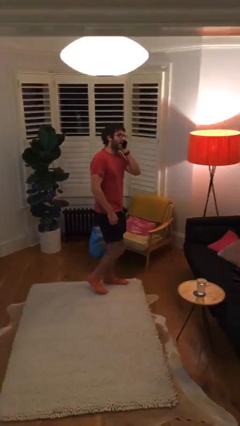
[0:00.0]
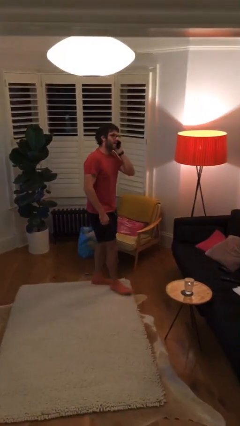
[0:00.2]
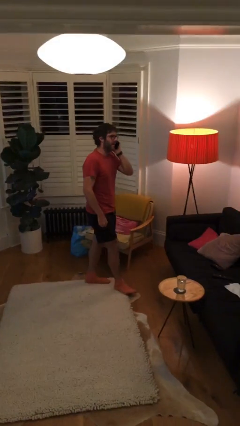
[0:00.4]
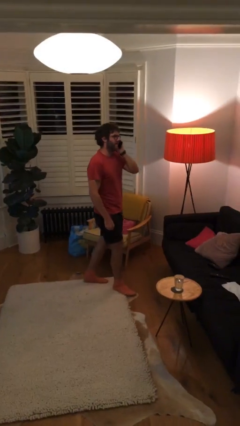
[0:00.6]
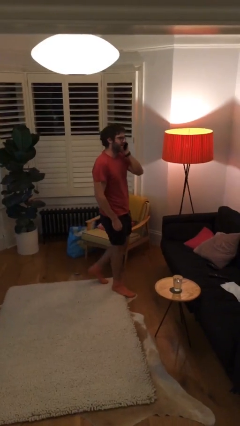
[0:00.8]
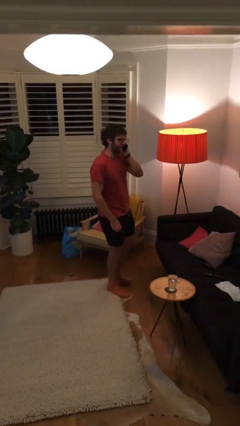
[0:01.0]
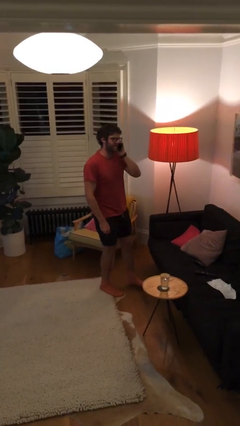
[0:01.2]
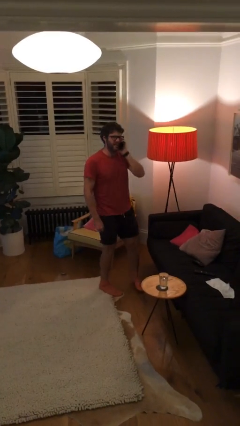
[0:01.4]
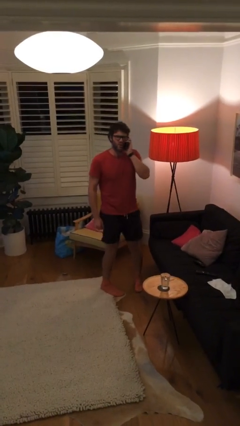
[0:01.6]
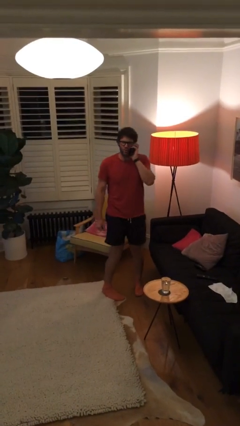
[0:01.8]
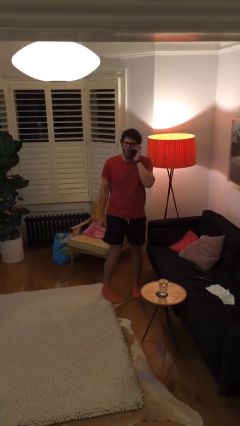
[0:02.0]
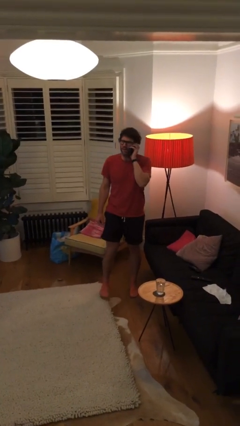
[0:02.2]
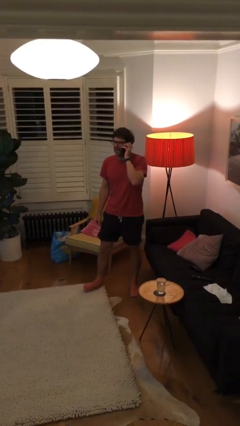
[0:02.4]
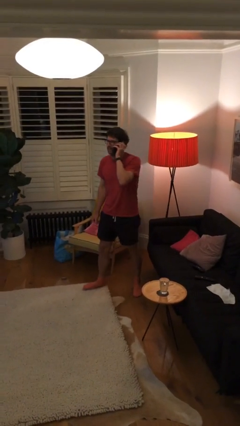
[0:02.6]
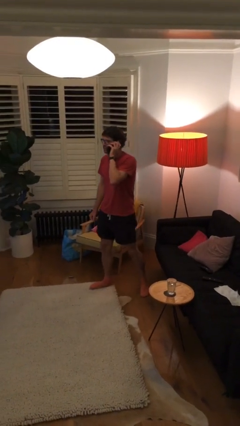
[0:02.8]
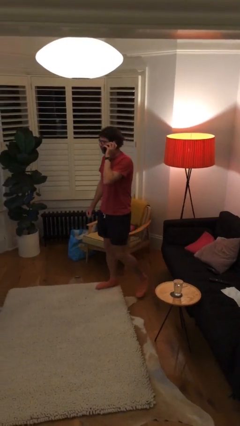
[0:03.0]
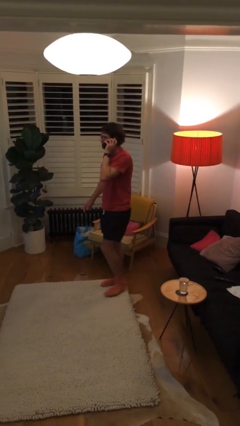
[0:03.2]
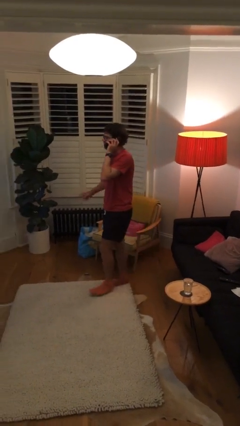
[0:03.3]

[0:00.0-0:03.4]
person talks on phone

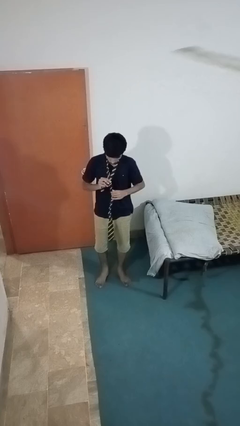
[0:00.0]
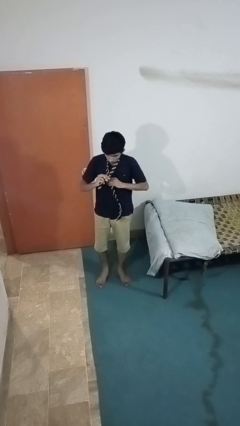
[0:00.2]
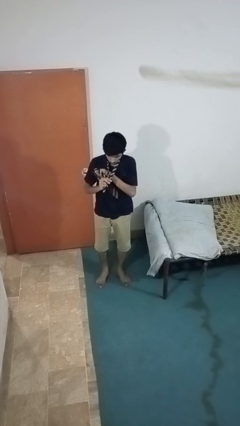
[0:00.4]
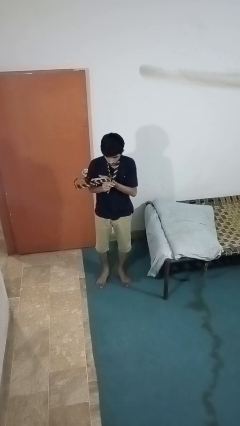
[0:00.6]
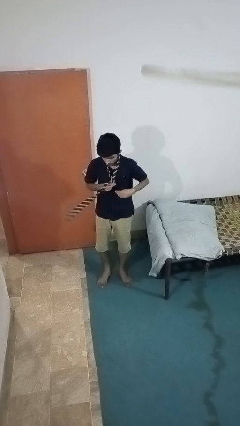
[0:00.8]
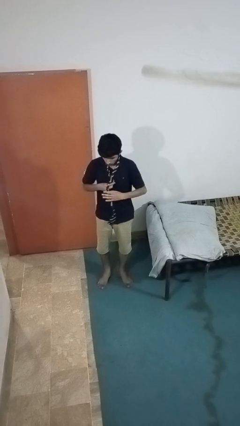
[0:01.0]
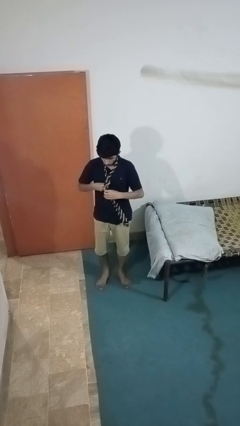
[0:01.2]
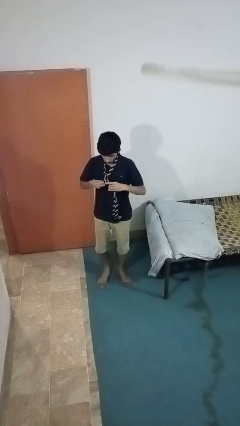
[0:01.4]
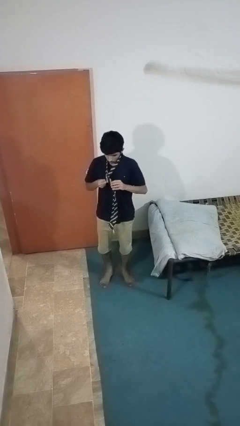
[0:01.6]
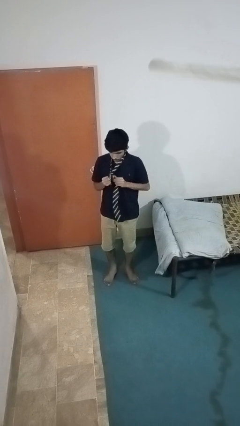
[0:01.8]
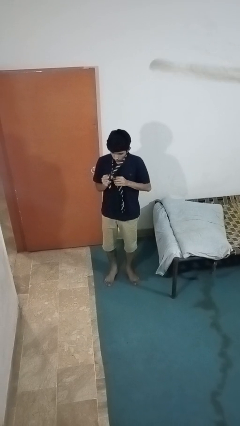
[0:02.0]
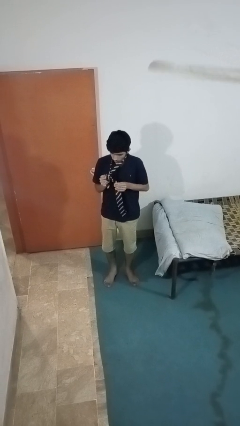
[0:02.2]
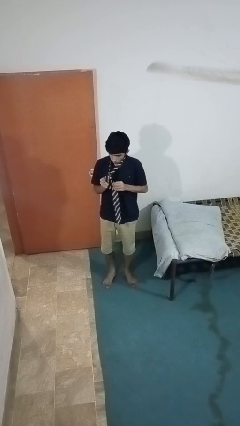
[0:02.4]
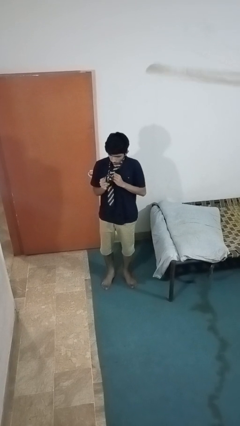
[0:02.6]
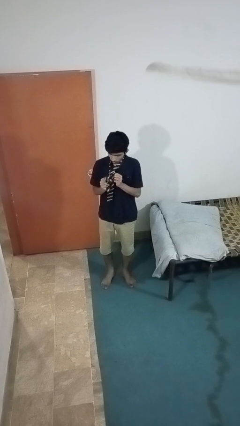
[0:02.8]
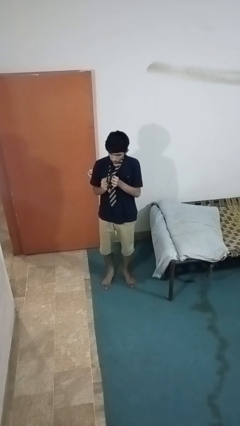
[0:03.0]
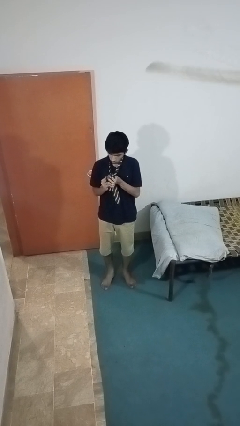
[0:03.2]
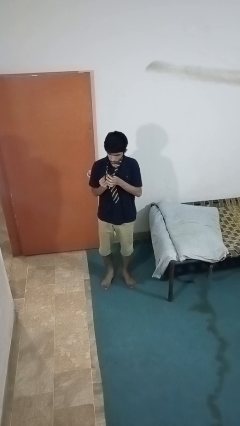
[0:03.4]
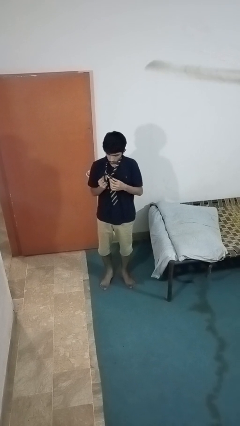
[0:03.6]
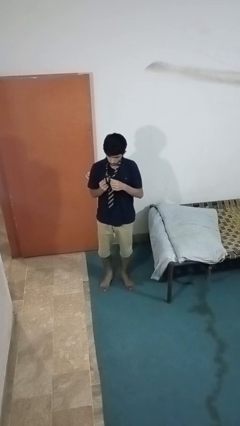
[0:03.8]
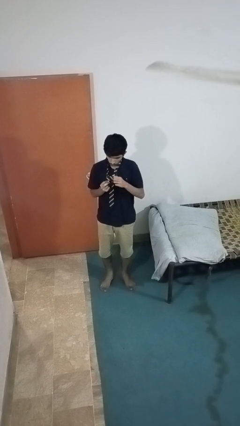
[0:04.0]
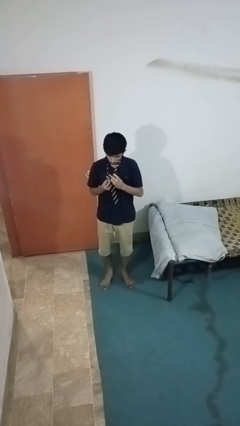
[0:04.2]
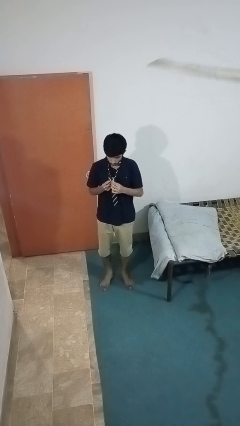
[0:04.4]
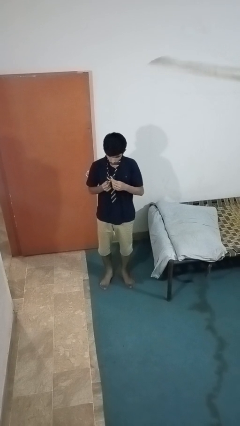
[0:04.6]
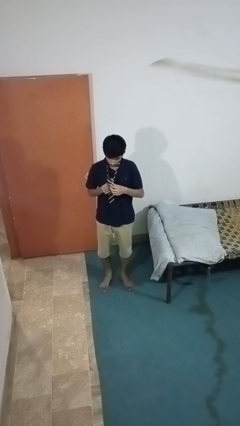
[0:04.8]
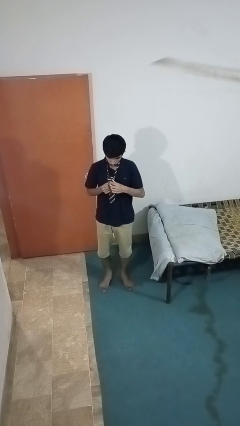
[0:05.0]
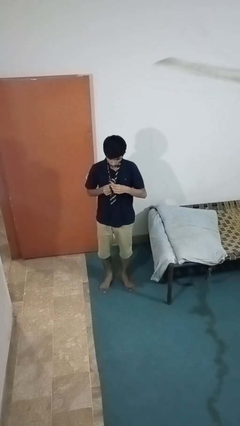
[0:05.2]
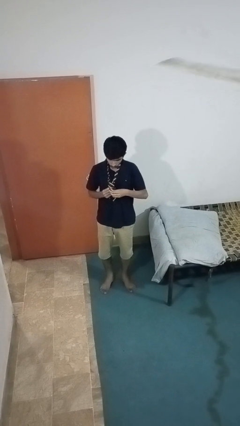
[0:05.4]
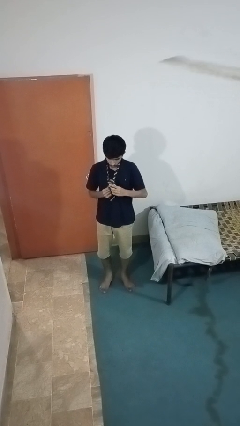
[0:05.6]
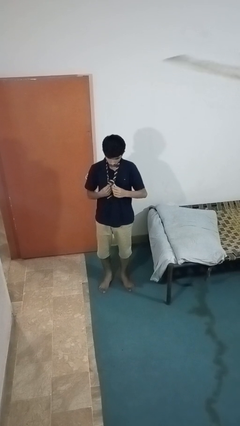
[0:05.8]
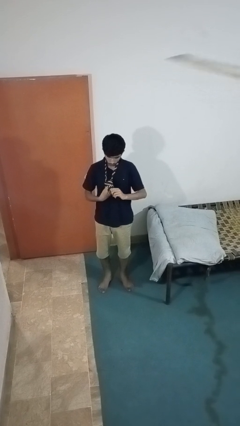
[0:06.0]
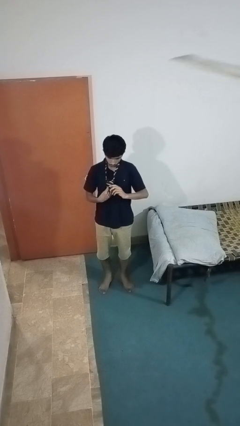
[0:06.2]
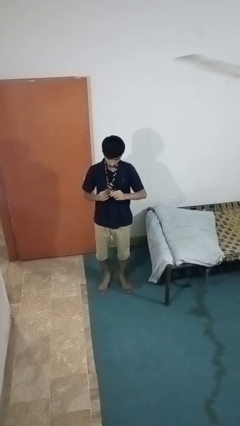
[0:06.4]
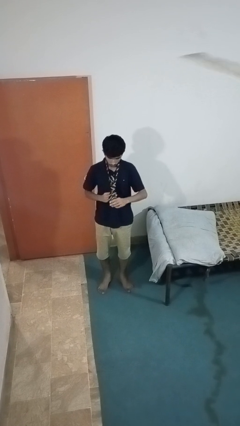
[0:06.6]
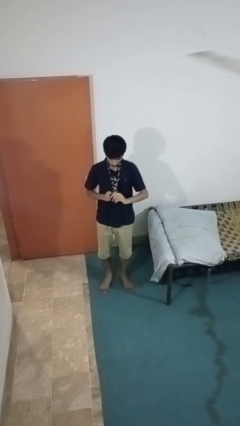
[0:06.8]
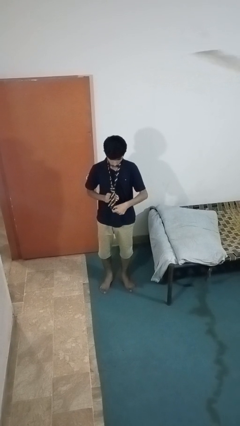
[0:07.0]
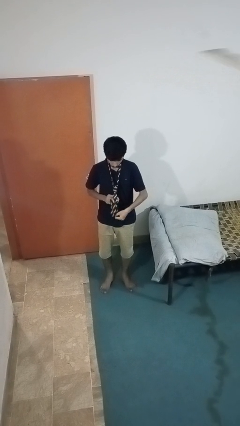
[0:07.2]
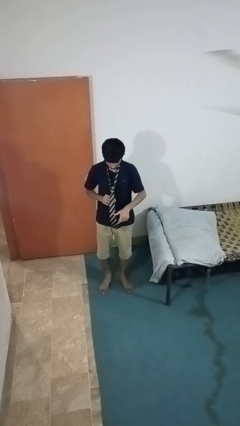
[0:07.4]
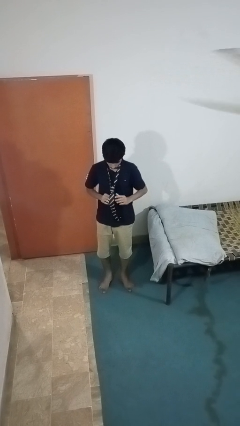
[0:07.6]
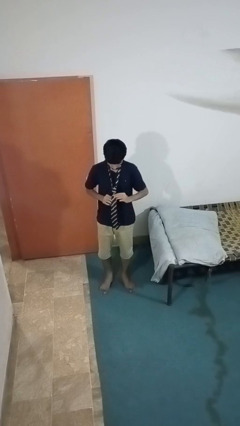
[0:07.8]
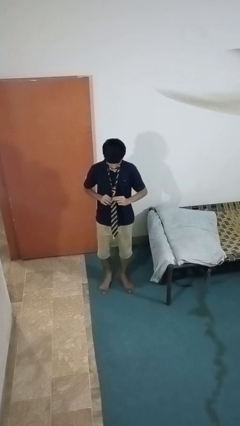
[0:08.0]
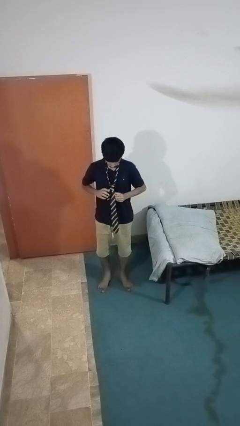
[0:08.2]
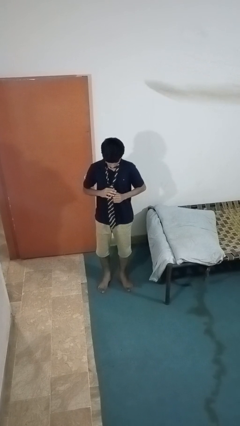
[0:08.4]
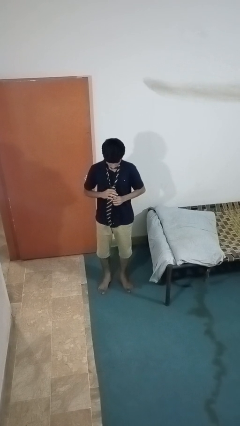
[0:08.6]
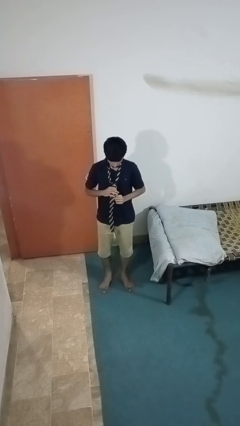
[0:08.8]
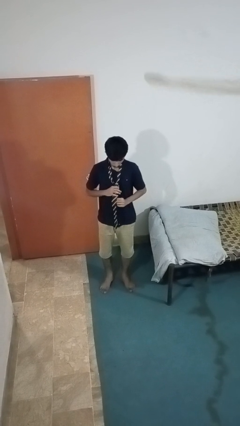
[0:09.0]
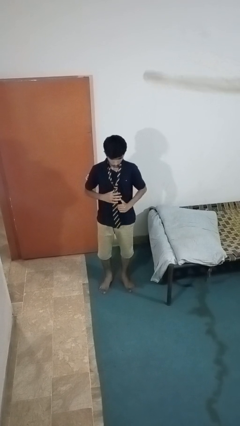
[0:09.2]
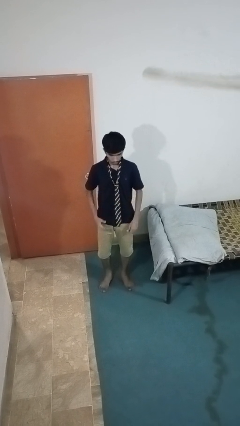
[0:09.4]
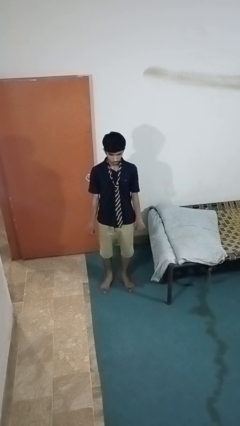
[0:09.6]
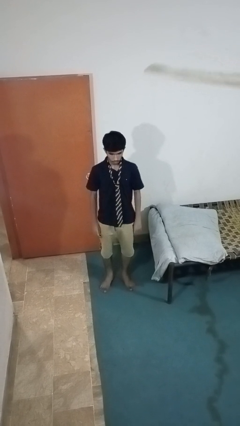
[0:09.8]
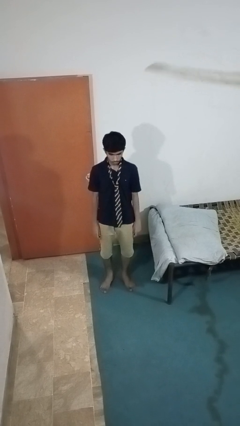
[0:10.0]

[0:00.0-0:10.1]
person puts on necktie

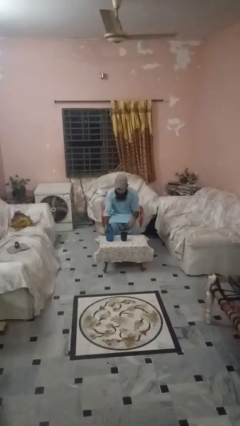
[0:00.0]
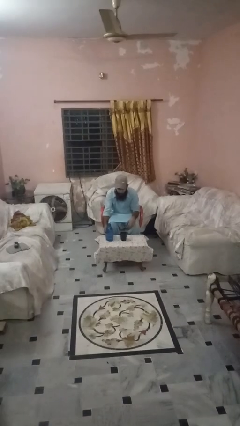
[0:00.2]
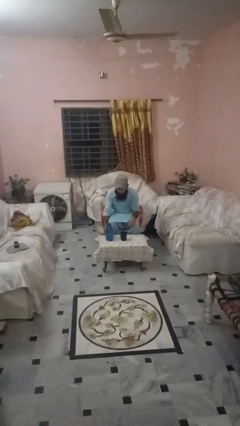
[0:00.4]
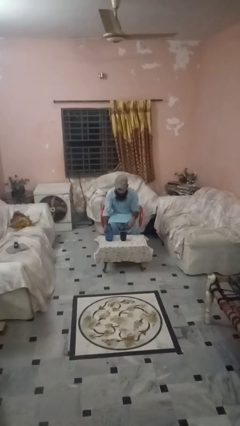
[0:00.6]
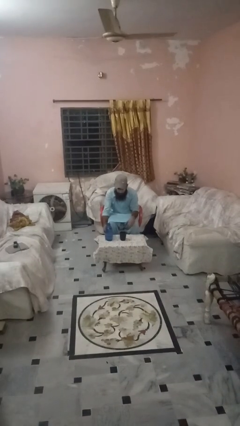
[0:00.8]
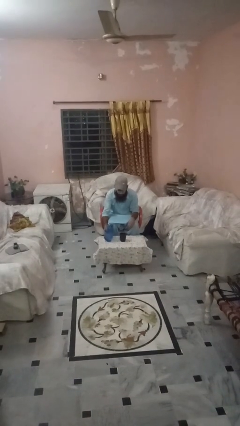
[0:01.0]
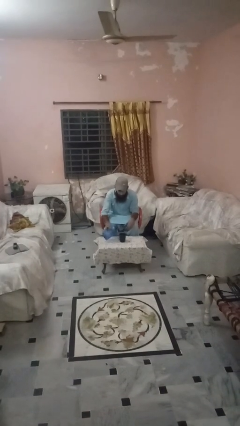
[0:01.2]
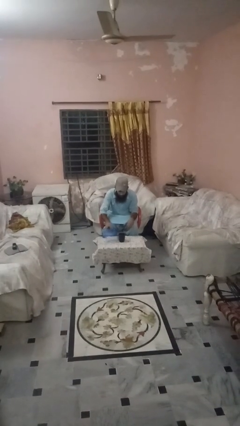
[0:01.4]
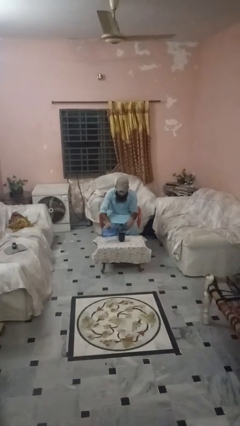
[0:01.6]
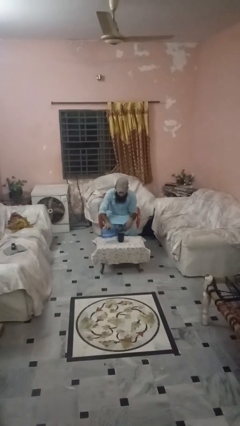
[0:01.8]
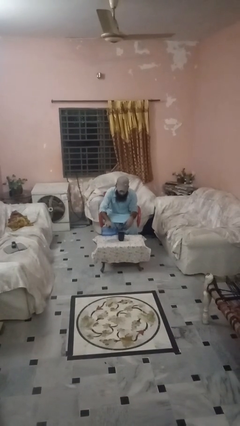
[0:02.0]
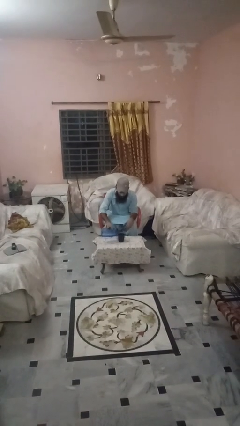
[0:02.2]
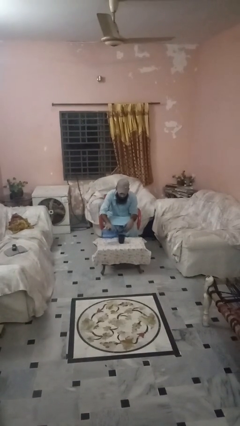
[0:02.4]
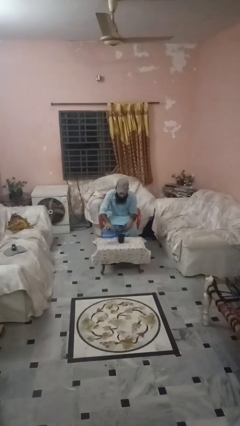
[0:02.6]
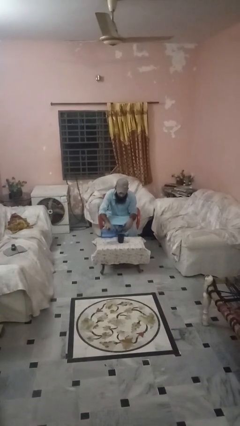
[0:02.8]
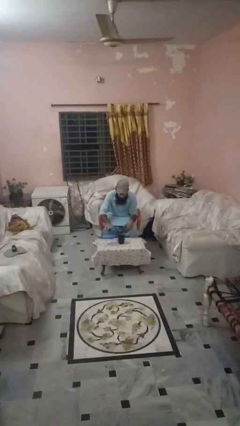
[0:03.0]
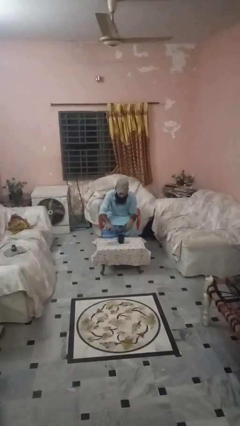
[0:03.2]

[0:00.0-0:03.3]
person pours liquid into cup

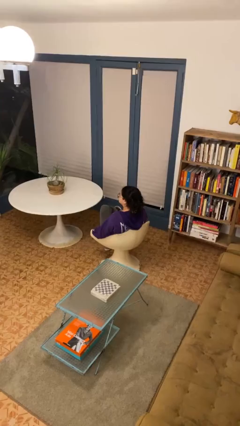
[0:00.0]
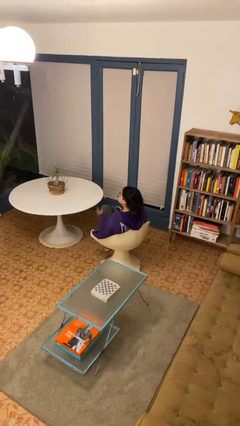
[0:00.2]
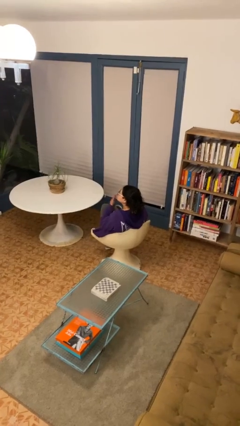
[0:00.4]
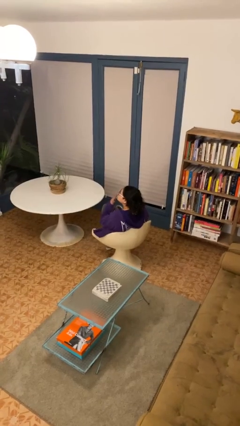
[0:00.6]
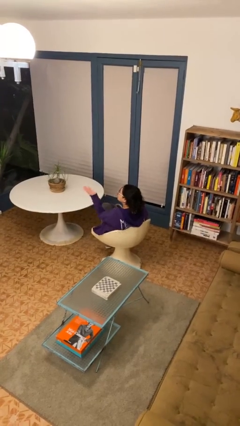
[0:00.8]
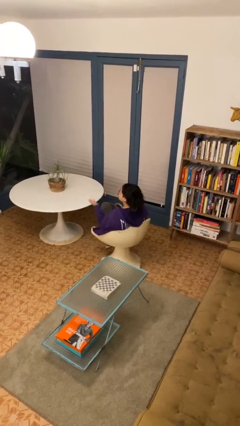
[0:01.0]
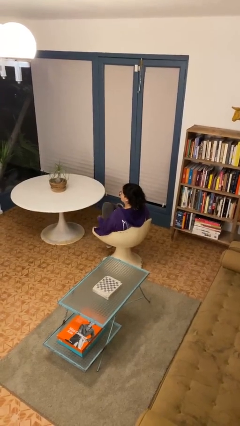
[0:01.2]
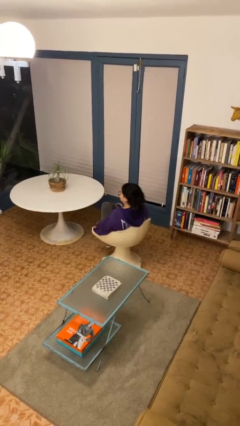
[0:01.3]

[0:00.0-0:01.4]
person gestures blow kiss
